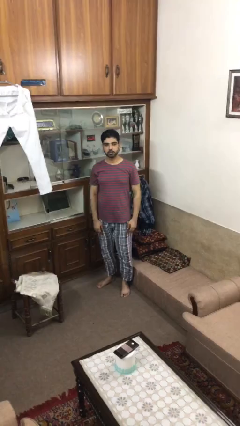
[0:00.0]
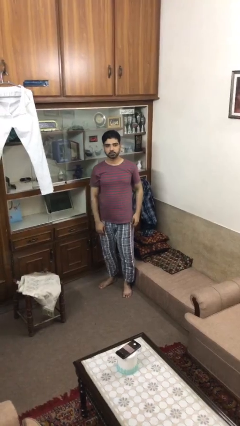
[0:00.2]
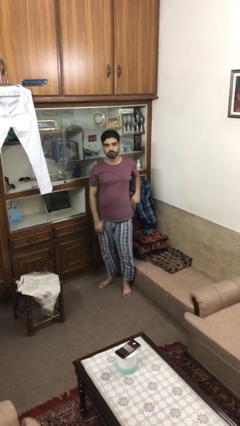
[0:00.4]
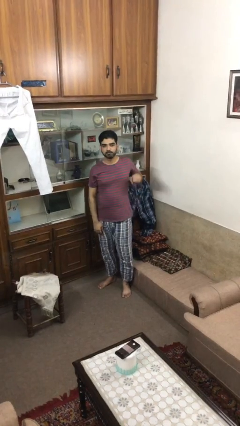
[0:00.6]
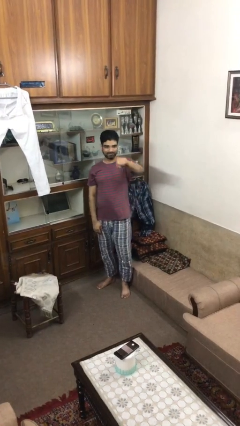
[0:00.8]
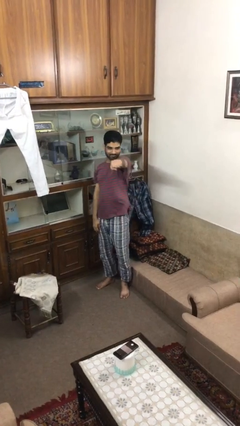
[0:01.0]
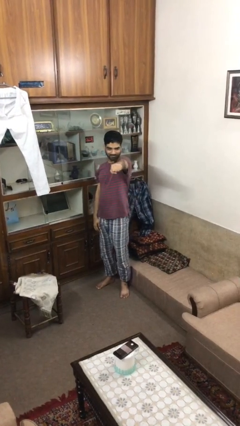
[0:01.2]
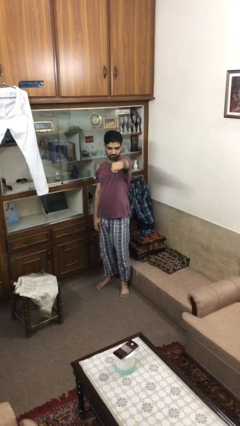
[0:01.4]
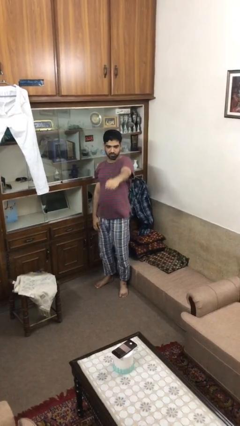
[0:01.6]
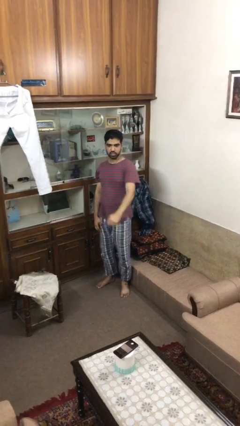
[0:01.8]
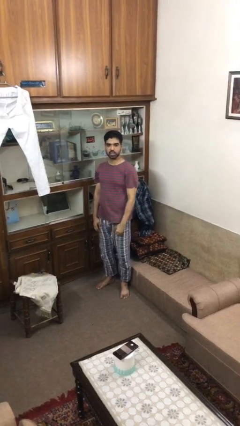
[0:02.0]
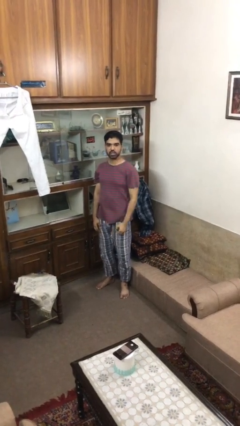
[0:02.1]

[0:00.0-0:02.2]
person punches

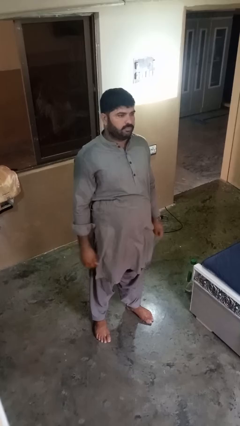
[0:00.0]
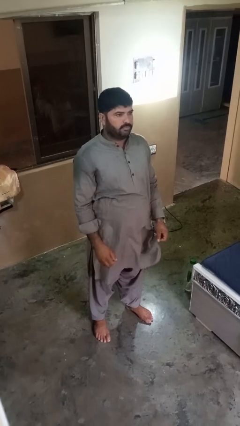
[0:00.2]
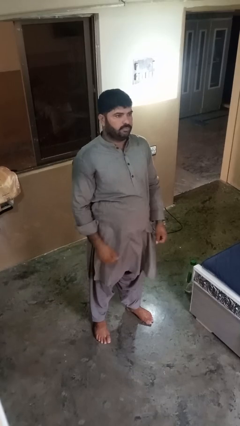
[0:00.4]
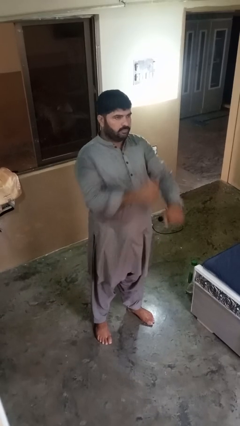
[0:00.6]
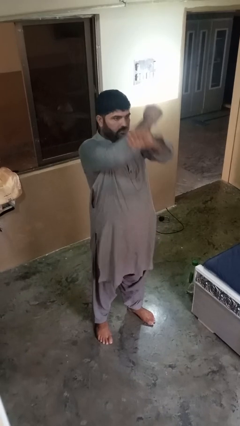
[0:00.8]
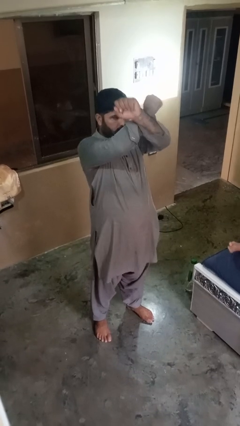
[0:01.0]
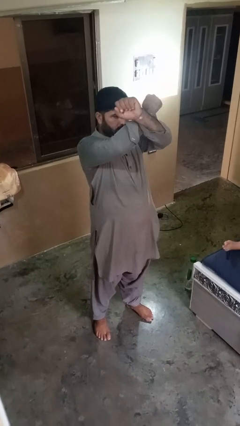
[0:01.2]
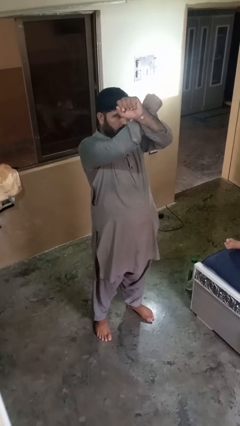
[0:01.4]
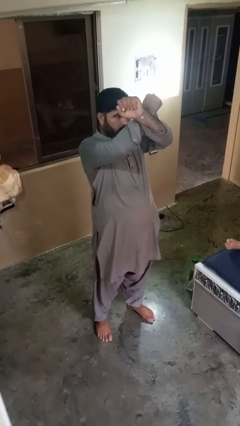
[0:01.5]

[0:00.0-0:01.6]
person gestures arms x

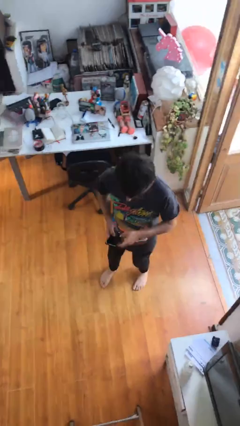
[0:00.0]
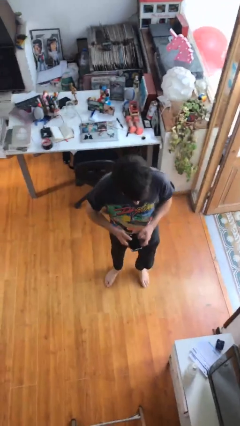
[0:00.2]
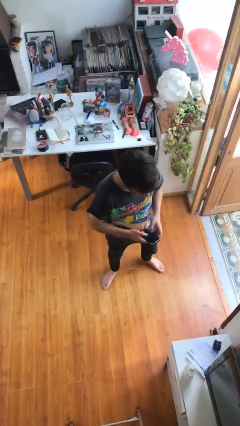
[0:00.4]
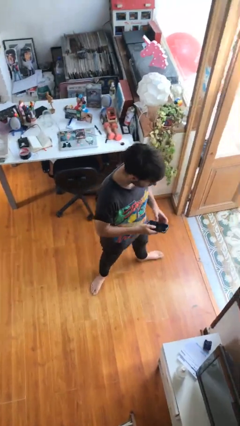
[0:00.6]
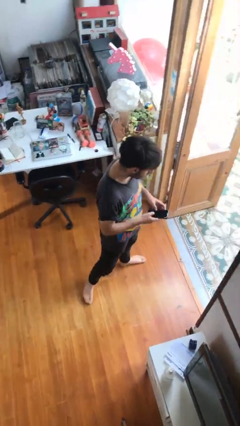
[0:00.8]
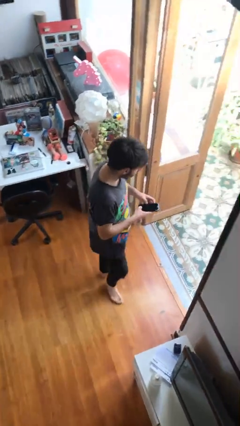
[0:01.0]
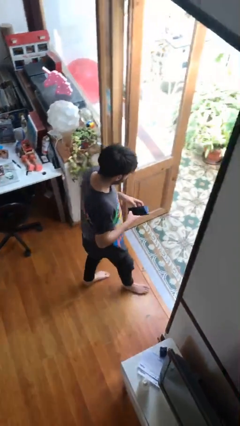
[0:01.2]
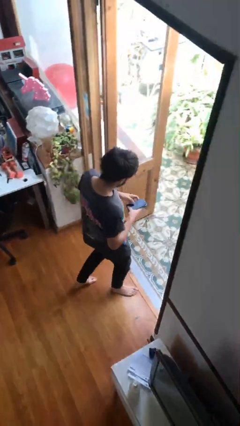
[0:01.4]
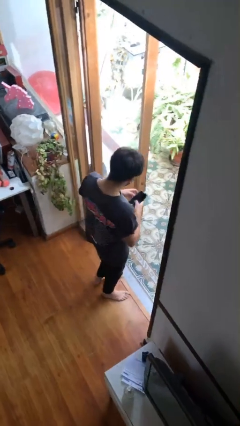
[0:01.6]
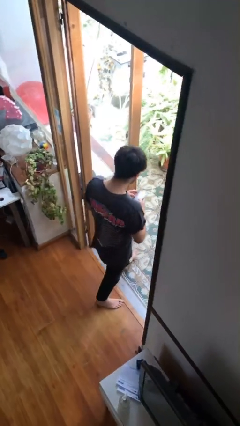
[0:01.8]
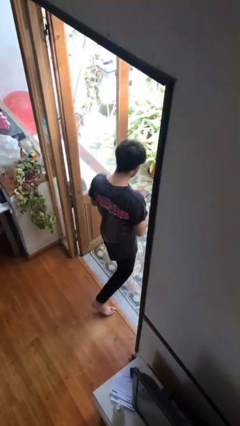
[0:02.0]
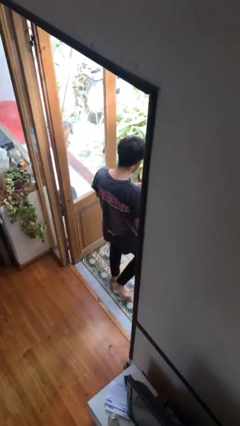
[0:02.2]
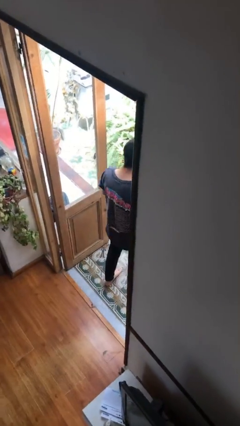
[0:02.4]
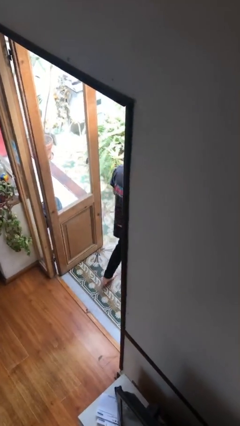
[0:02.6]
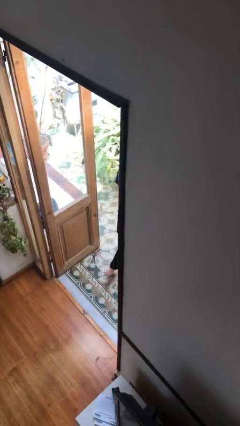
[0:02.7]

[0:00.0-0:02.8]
person exits scene through structure

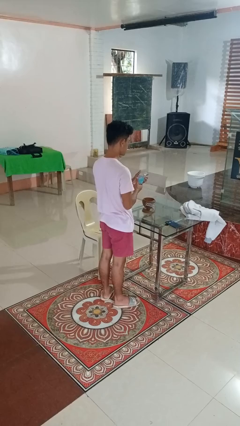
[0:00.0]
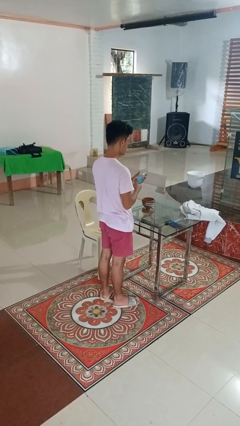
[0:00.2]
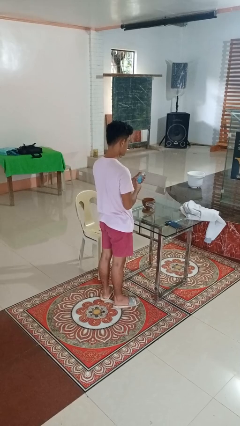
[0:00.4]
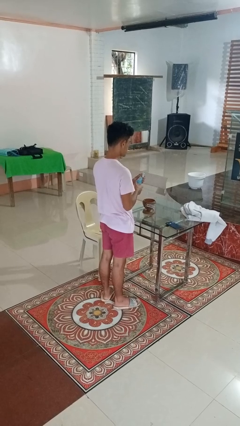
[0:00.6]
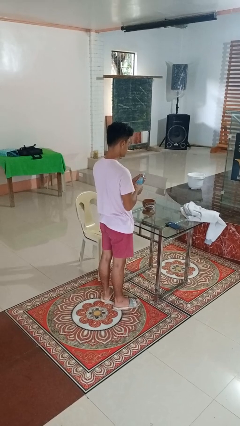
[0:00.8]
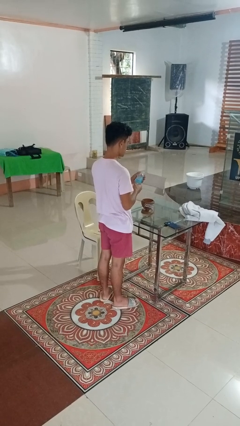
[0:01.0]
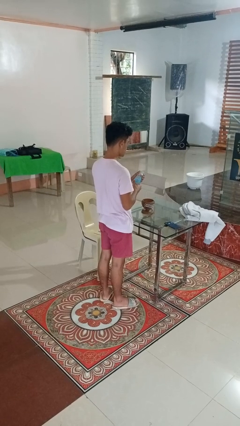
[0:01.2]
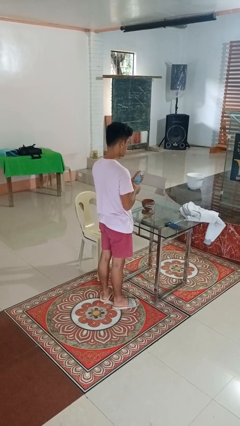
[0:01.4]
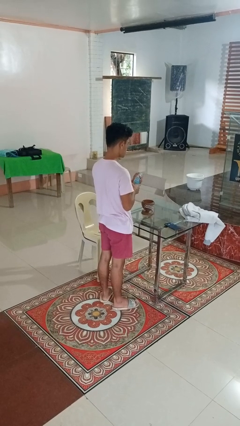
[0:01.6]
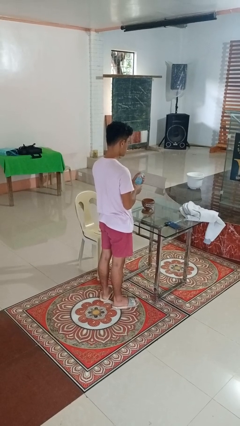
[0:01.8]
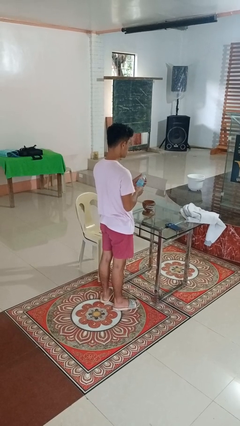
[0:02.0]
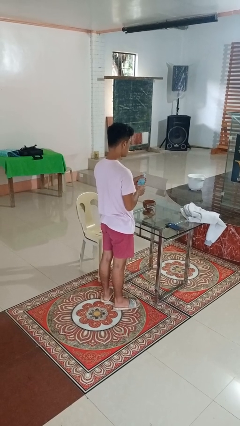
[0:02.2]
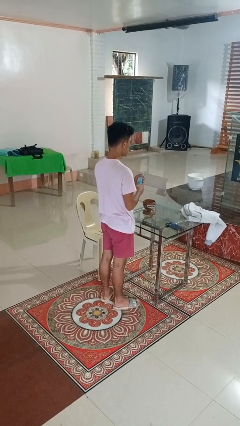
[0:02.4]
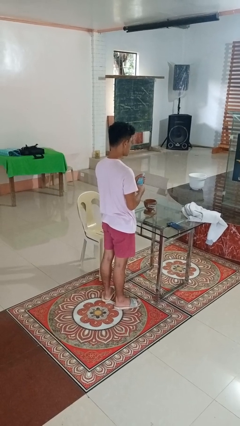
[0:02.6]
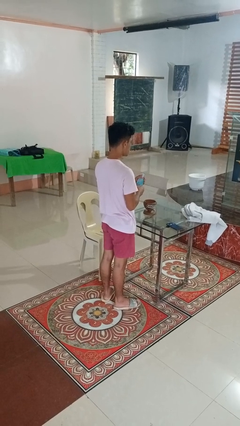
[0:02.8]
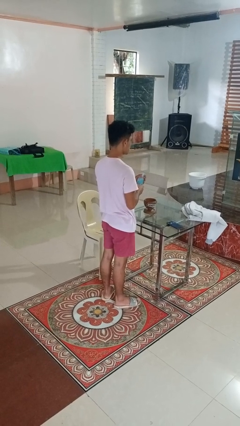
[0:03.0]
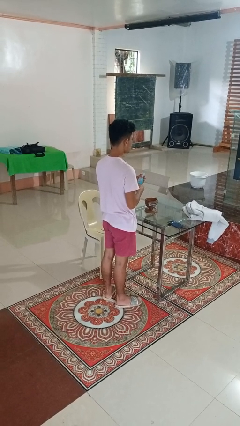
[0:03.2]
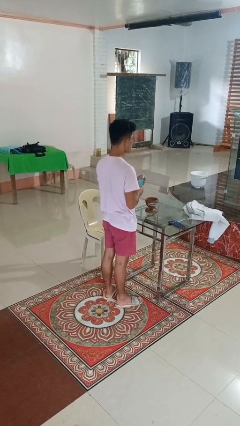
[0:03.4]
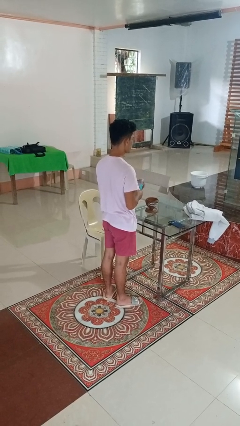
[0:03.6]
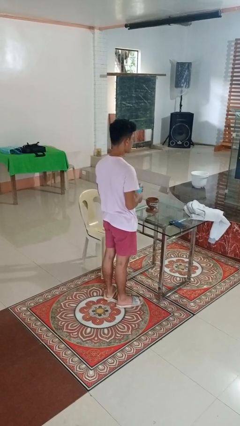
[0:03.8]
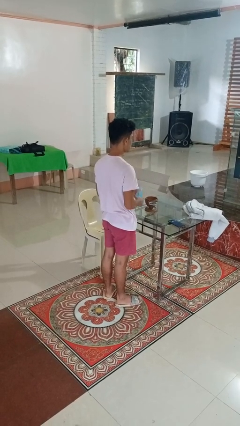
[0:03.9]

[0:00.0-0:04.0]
person squeezes object

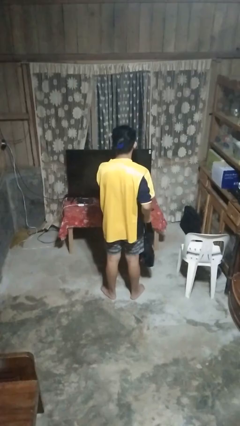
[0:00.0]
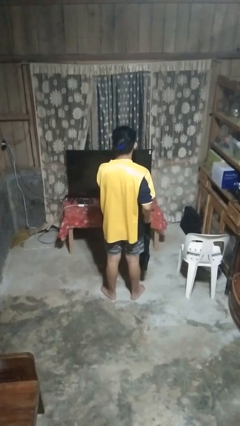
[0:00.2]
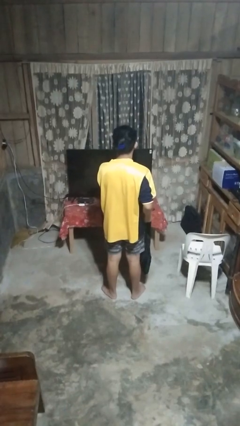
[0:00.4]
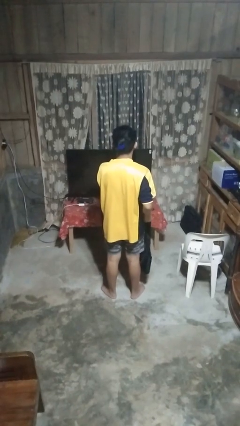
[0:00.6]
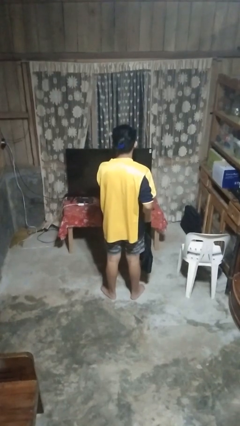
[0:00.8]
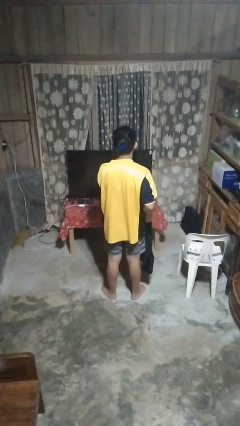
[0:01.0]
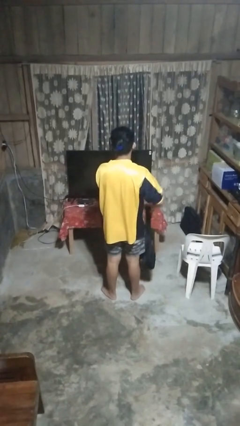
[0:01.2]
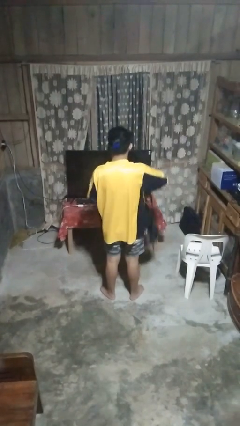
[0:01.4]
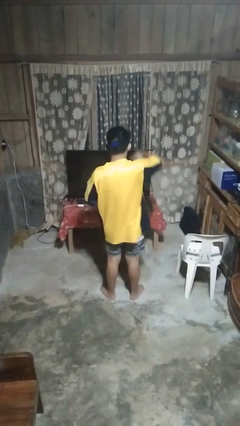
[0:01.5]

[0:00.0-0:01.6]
person puts on backpack

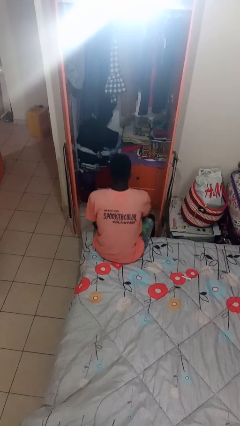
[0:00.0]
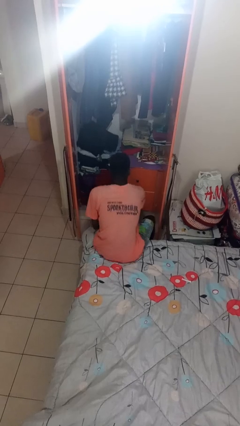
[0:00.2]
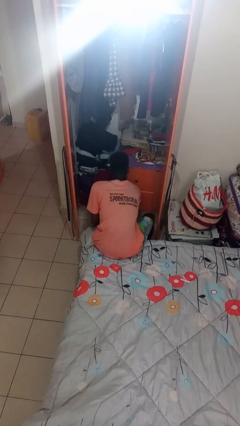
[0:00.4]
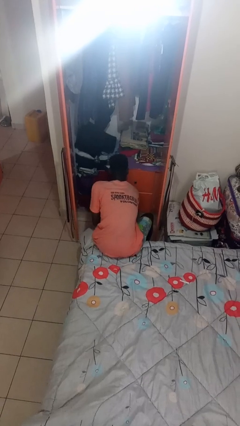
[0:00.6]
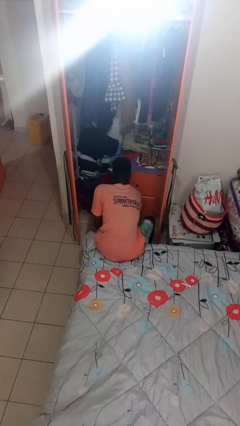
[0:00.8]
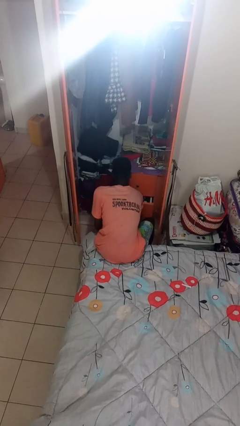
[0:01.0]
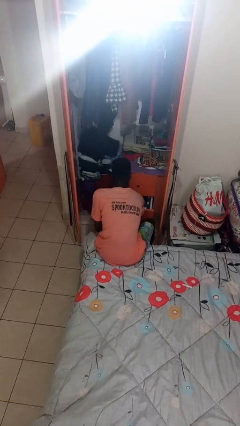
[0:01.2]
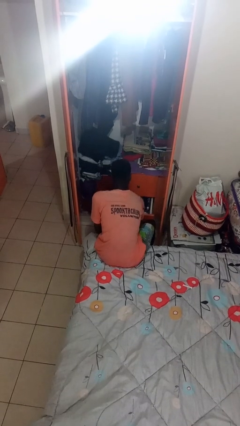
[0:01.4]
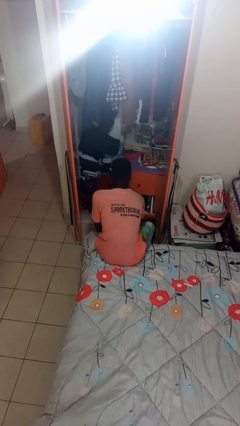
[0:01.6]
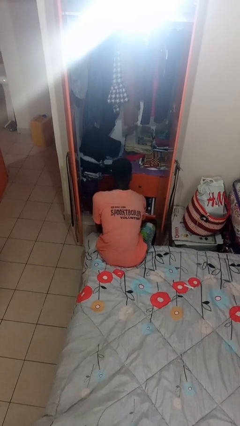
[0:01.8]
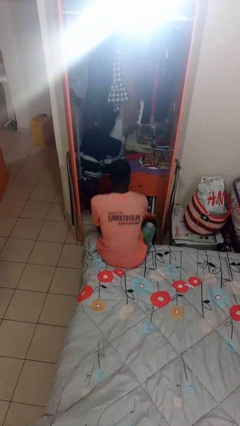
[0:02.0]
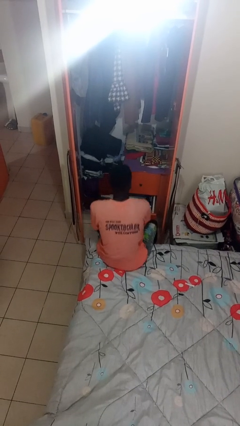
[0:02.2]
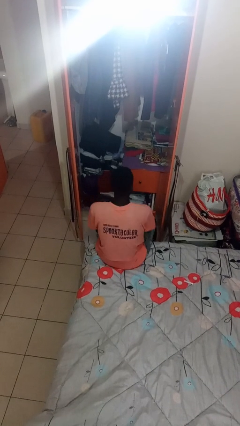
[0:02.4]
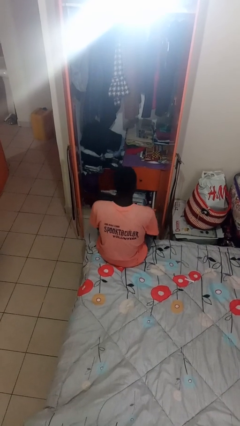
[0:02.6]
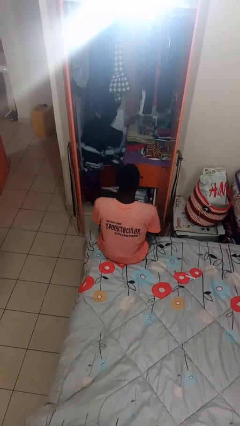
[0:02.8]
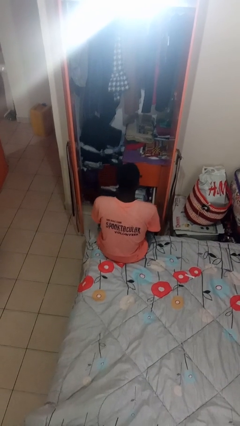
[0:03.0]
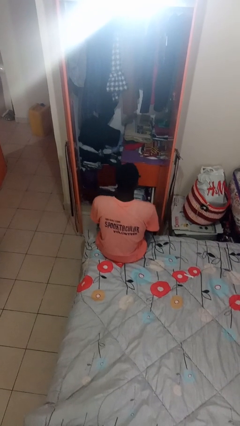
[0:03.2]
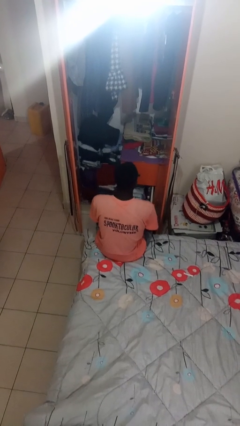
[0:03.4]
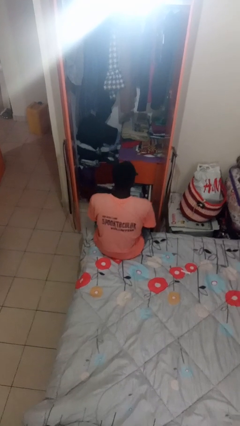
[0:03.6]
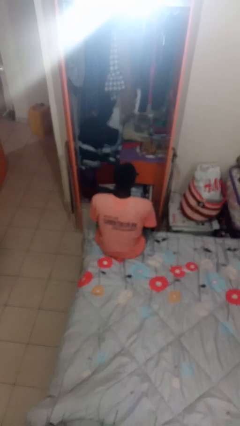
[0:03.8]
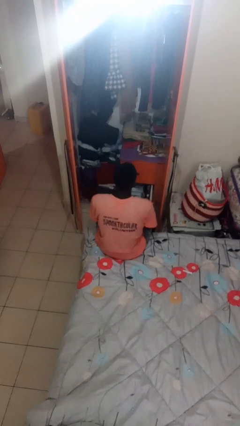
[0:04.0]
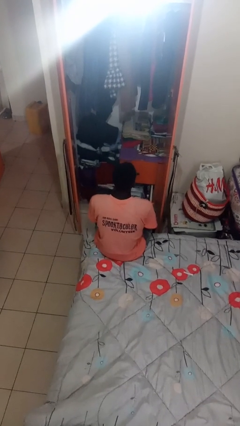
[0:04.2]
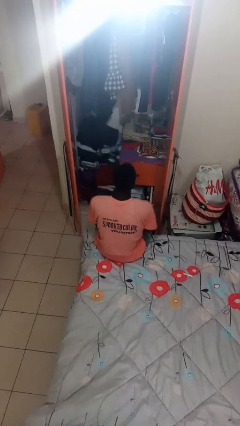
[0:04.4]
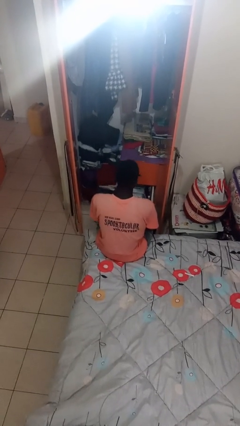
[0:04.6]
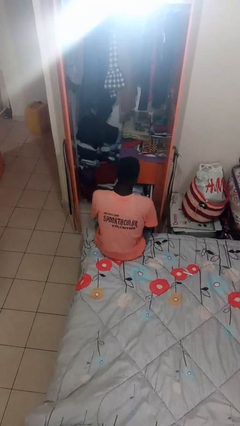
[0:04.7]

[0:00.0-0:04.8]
person opens dresser drawer

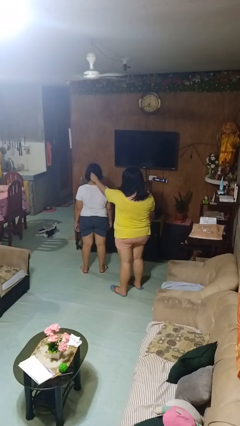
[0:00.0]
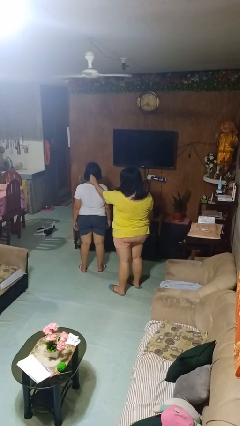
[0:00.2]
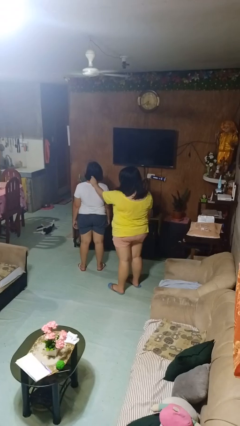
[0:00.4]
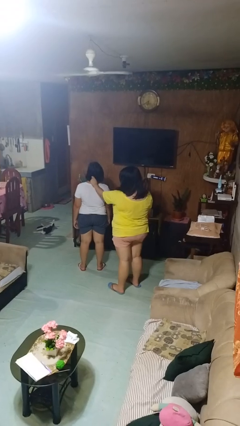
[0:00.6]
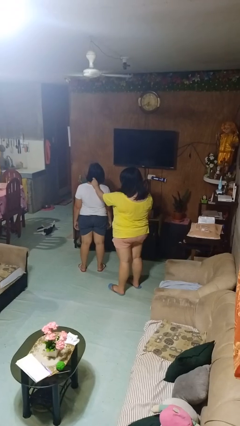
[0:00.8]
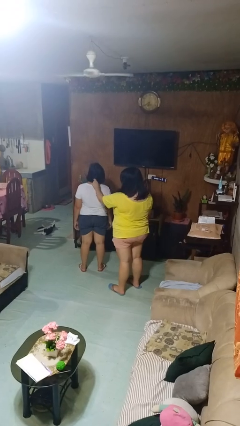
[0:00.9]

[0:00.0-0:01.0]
person grabs person by hair
